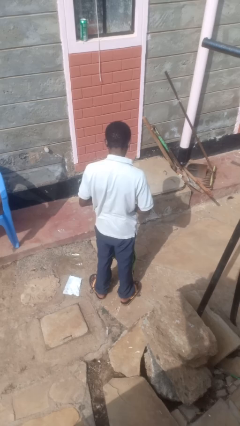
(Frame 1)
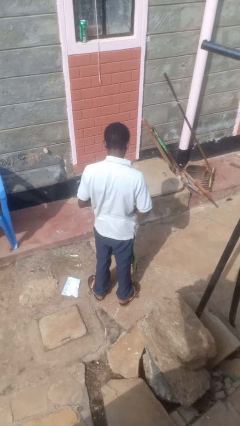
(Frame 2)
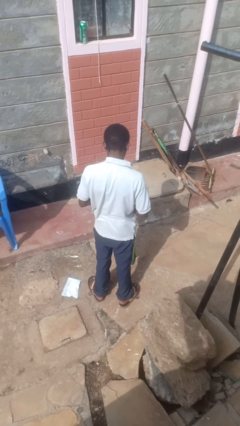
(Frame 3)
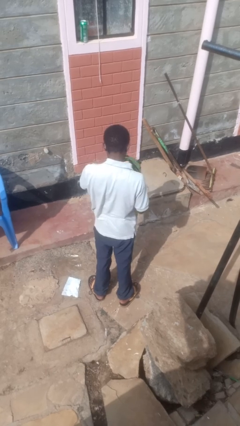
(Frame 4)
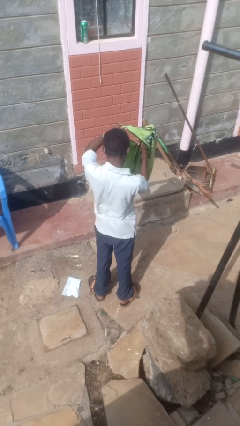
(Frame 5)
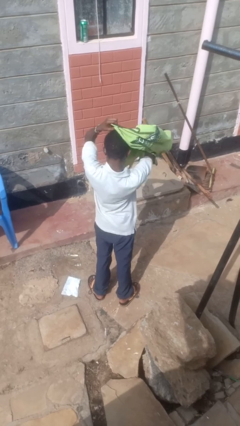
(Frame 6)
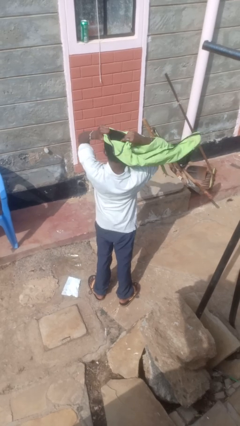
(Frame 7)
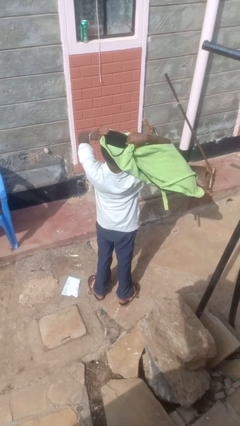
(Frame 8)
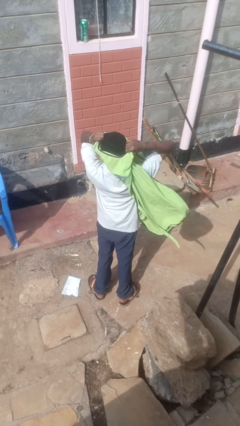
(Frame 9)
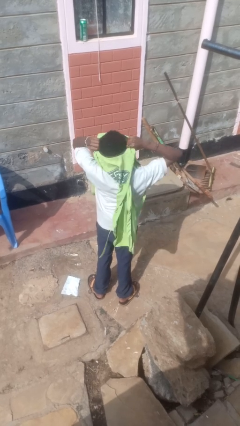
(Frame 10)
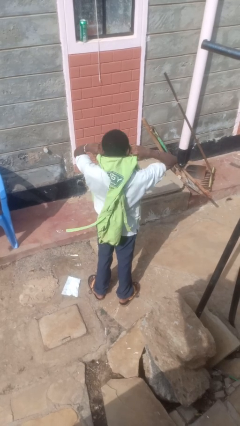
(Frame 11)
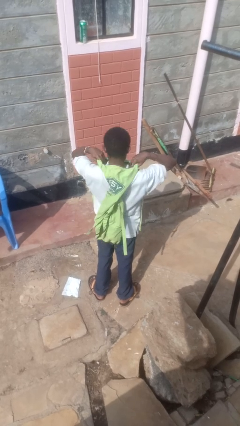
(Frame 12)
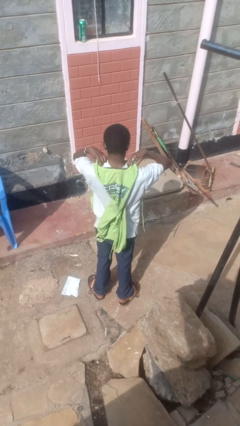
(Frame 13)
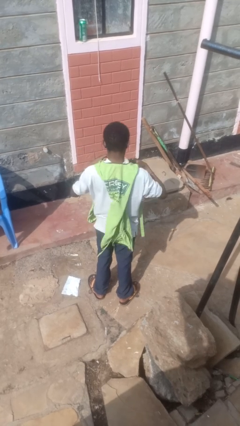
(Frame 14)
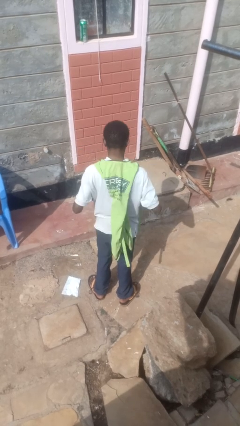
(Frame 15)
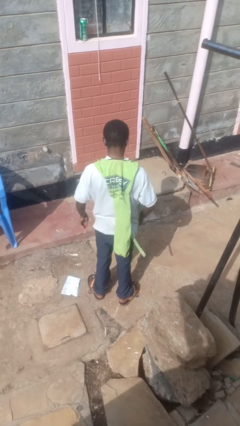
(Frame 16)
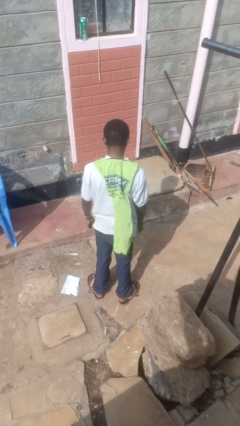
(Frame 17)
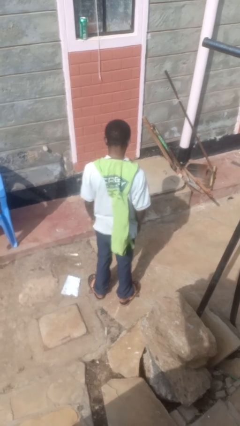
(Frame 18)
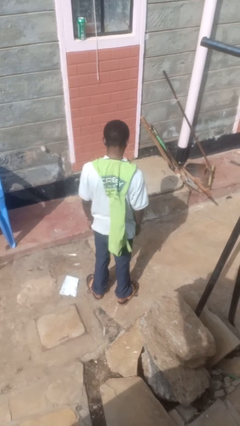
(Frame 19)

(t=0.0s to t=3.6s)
person puts on apron

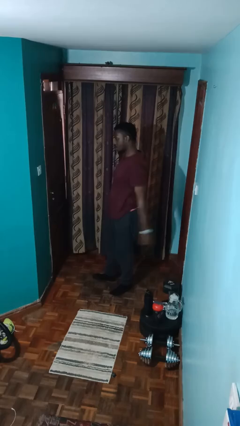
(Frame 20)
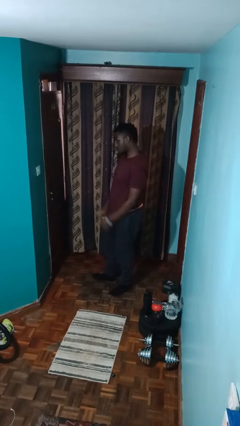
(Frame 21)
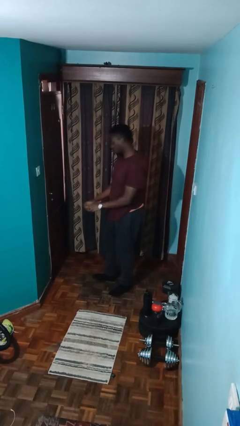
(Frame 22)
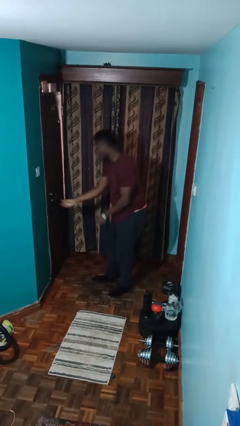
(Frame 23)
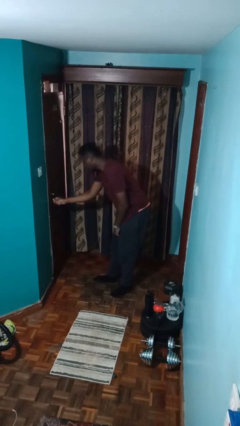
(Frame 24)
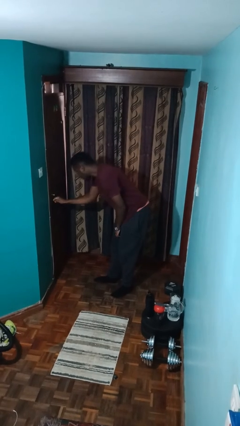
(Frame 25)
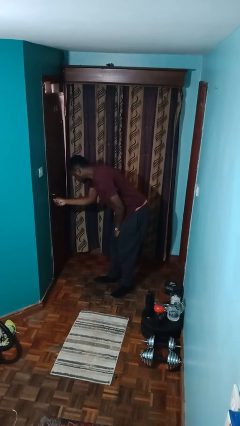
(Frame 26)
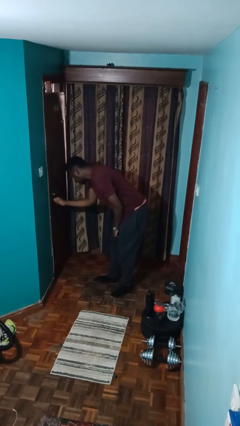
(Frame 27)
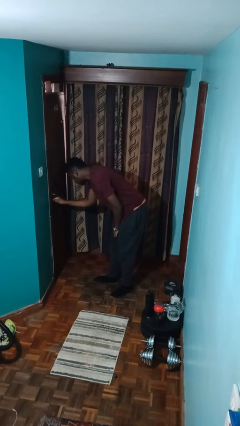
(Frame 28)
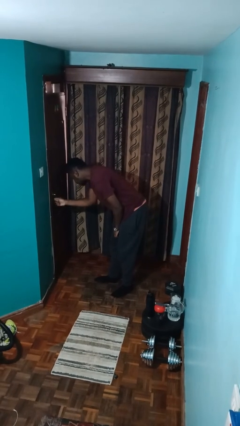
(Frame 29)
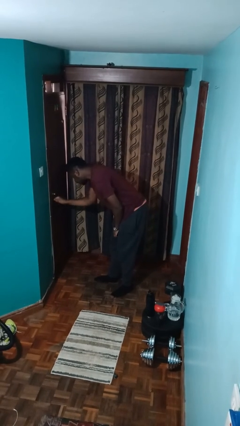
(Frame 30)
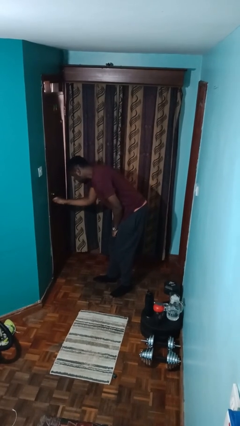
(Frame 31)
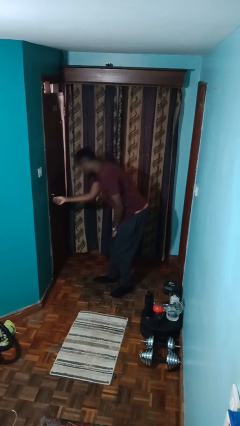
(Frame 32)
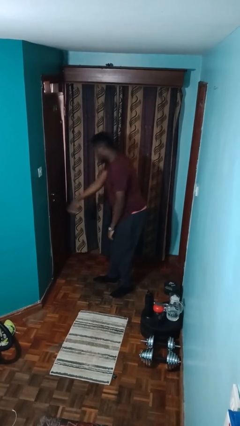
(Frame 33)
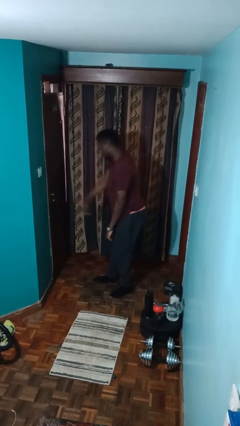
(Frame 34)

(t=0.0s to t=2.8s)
person locks door with keys

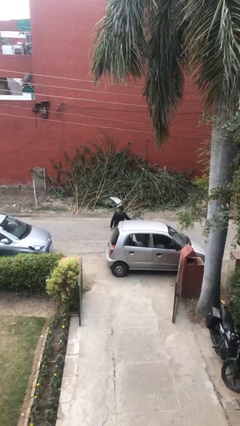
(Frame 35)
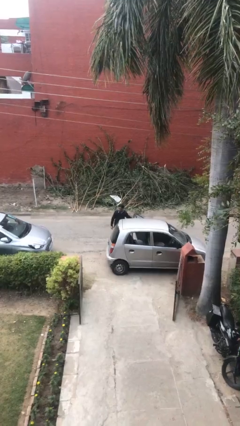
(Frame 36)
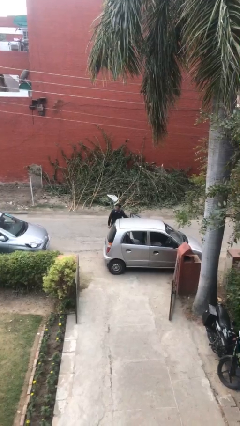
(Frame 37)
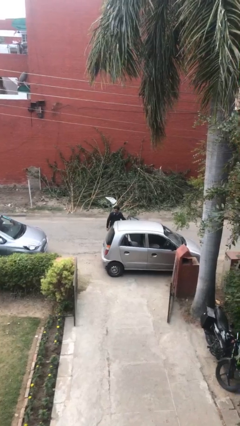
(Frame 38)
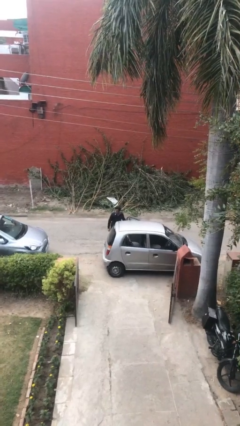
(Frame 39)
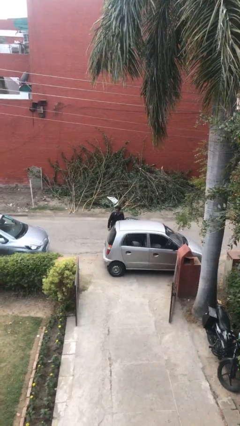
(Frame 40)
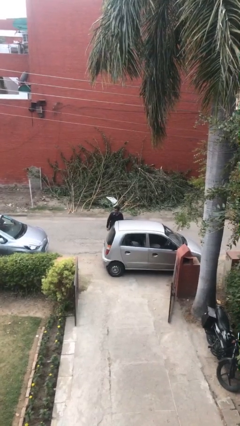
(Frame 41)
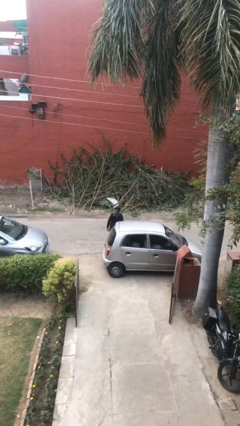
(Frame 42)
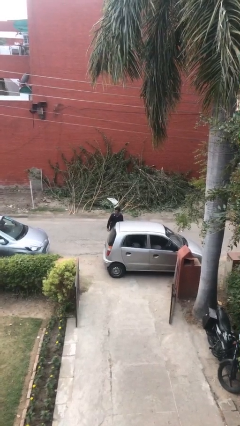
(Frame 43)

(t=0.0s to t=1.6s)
person closes car door

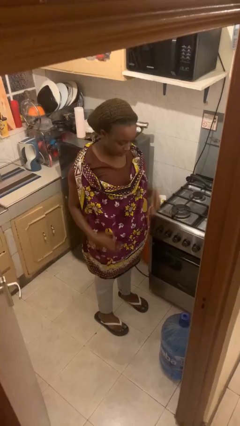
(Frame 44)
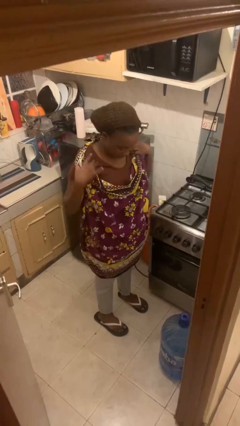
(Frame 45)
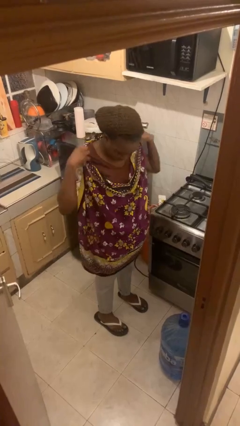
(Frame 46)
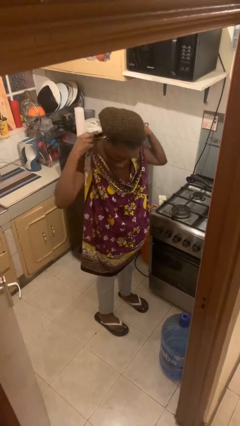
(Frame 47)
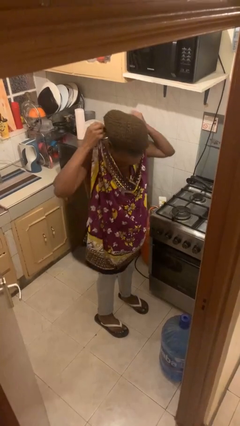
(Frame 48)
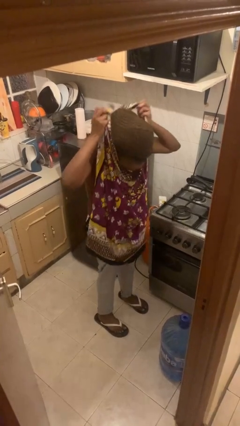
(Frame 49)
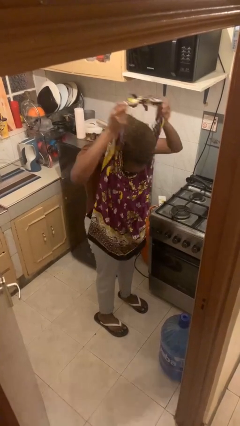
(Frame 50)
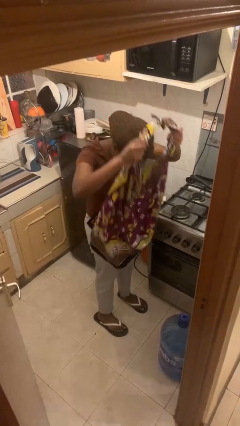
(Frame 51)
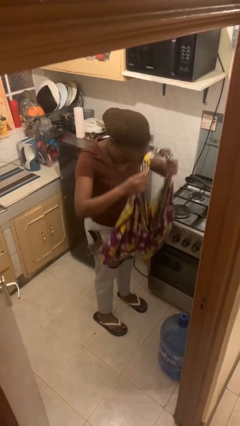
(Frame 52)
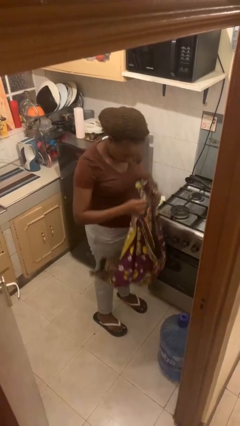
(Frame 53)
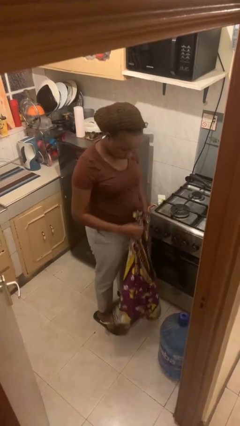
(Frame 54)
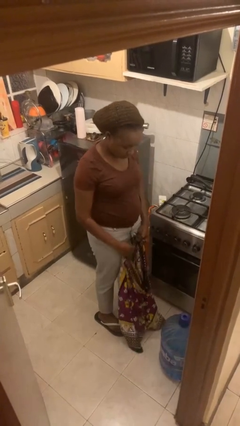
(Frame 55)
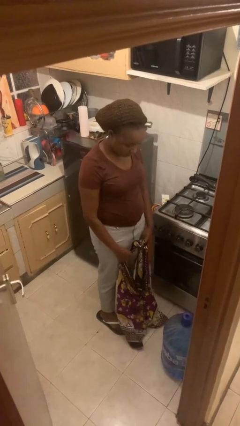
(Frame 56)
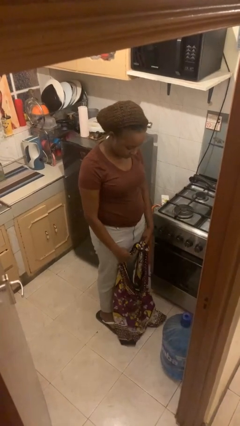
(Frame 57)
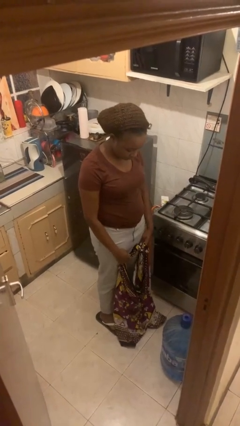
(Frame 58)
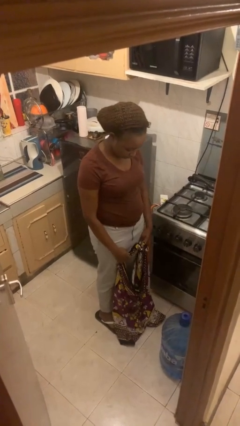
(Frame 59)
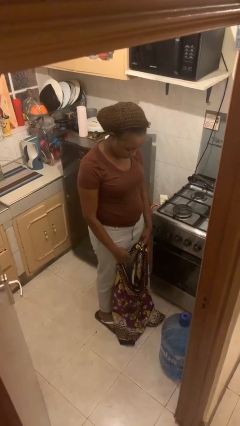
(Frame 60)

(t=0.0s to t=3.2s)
person takes off apron

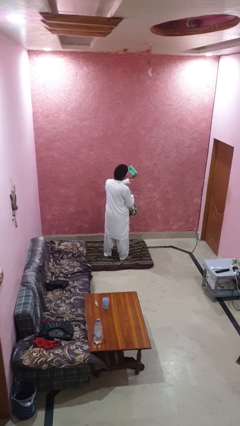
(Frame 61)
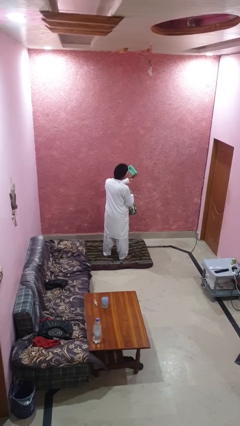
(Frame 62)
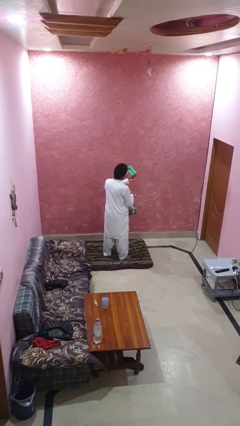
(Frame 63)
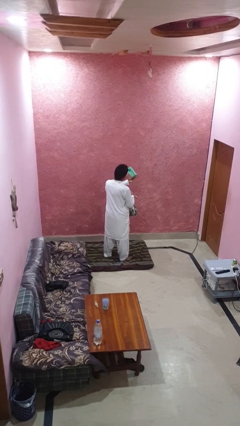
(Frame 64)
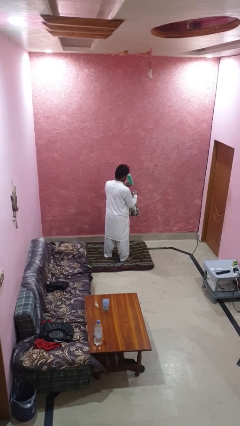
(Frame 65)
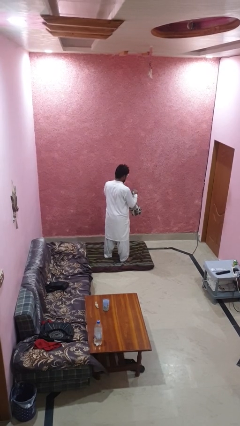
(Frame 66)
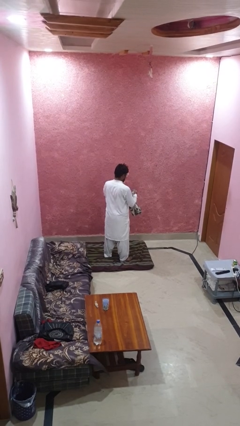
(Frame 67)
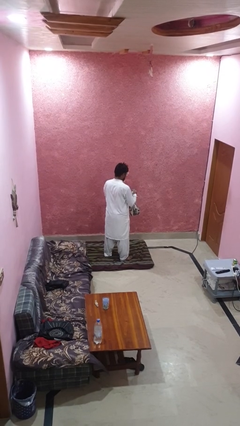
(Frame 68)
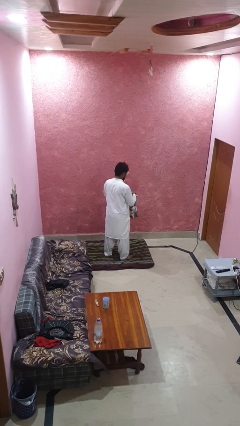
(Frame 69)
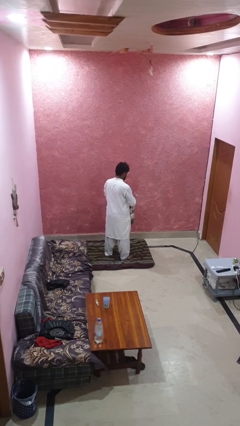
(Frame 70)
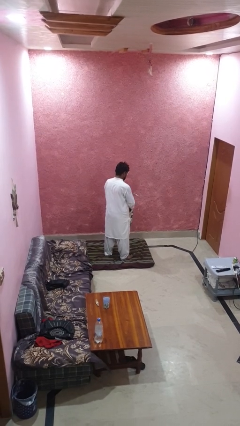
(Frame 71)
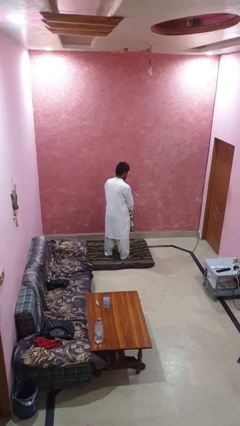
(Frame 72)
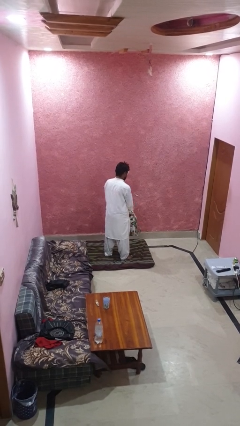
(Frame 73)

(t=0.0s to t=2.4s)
person puts object into backpack

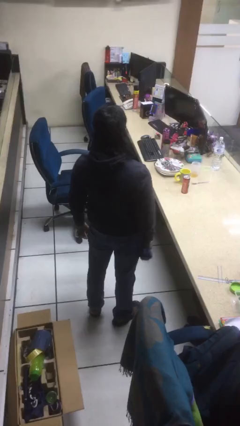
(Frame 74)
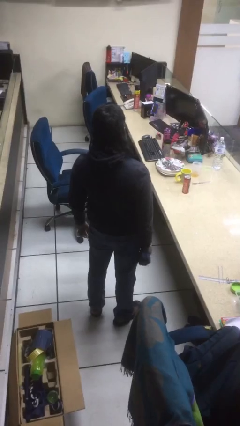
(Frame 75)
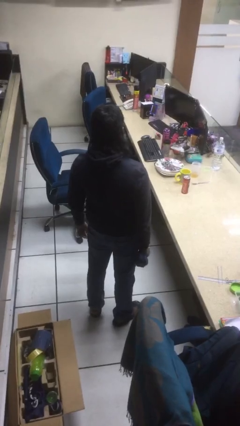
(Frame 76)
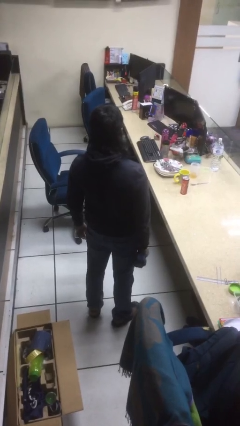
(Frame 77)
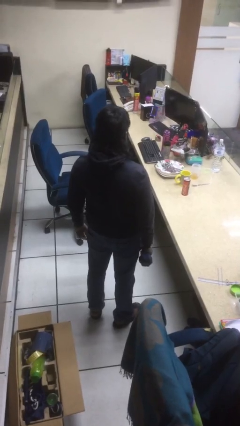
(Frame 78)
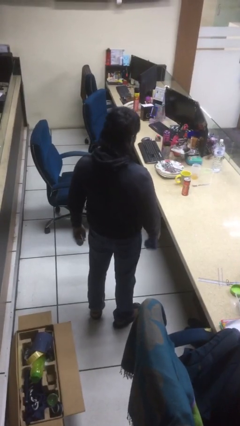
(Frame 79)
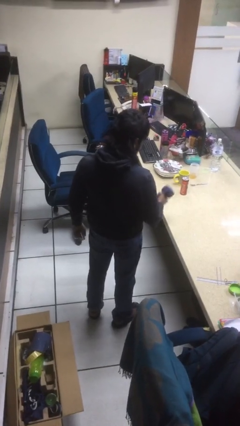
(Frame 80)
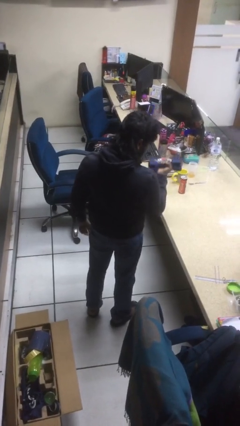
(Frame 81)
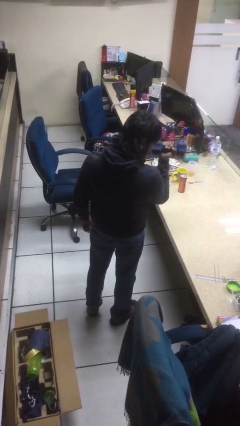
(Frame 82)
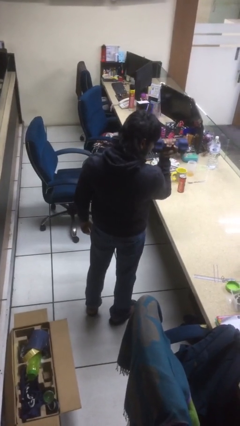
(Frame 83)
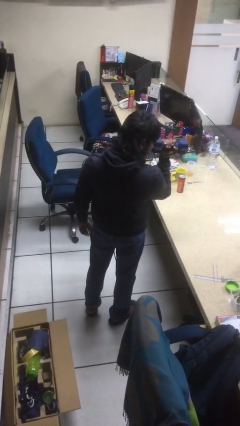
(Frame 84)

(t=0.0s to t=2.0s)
person lifts dumbbells

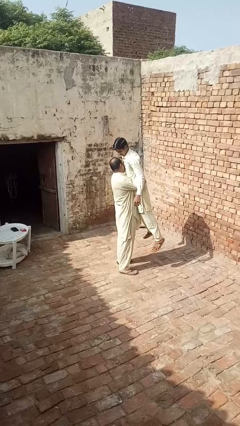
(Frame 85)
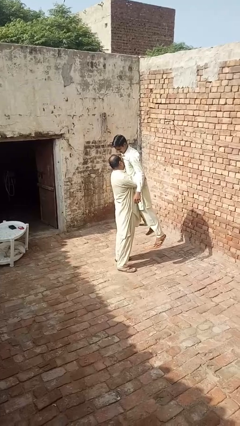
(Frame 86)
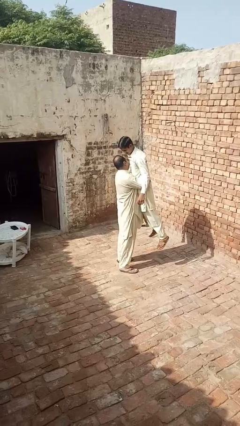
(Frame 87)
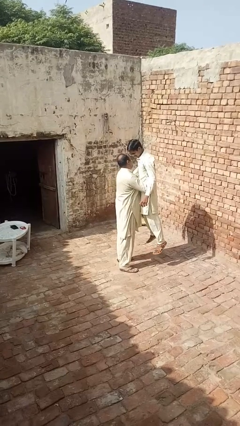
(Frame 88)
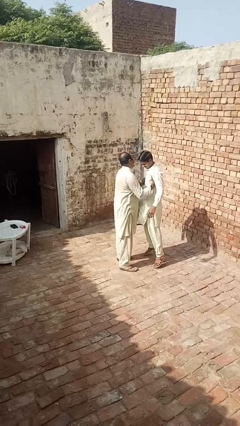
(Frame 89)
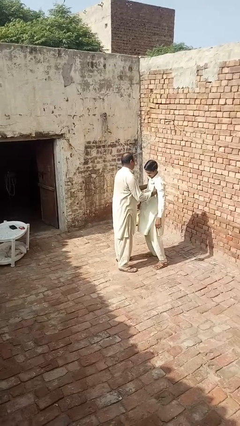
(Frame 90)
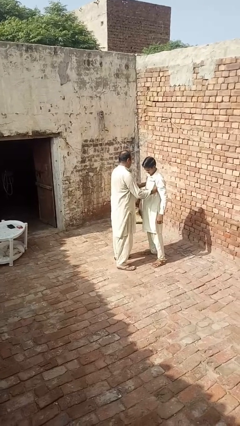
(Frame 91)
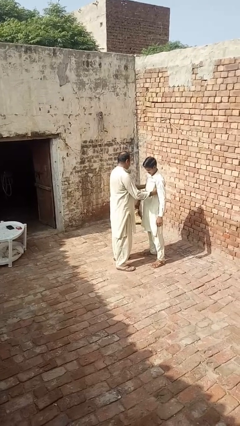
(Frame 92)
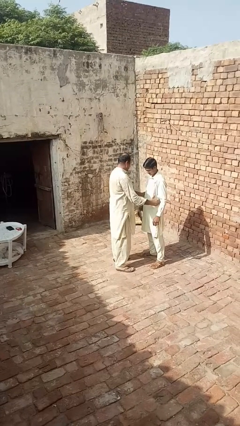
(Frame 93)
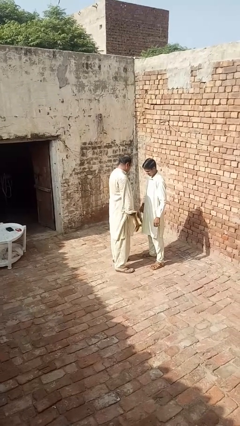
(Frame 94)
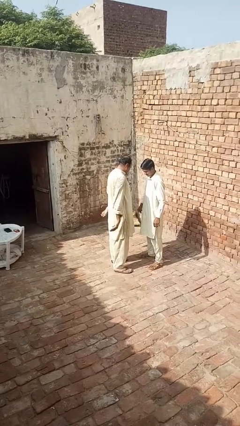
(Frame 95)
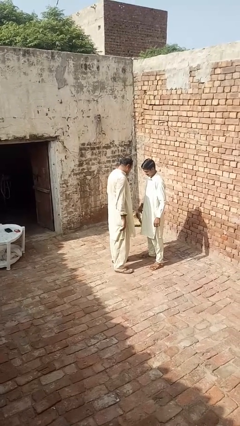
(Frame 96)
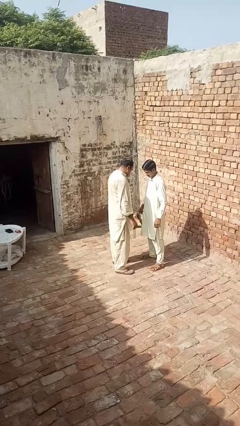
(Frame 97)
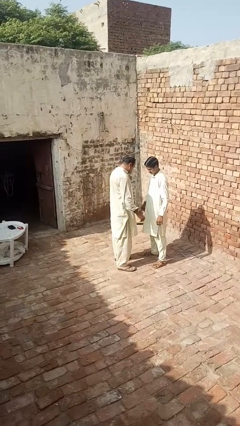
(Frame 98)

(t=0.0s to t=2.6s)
person puts down person
